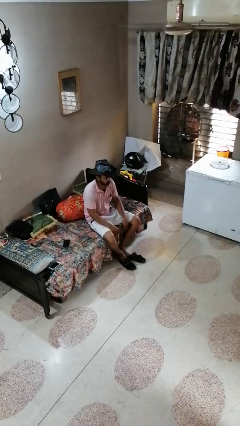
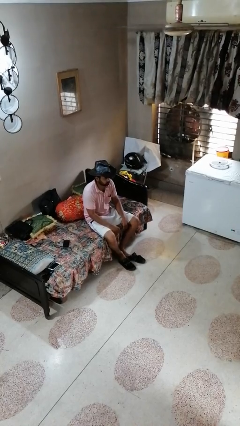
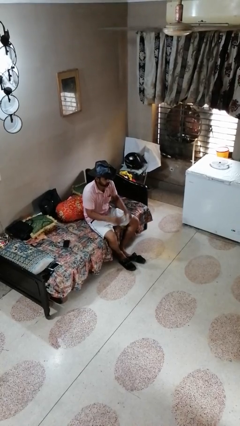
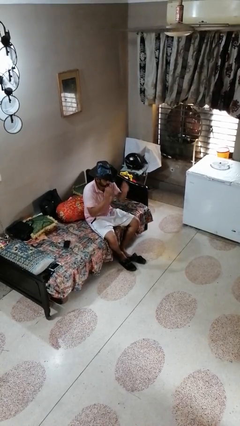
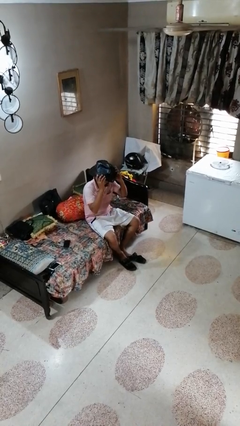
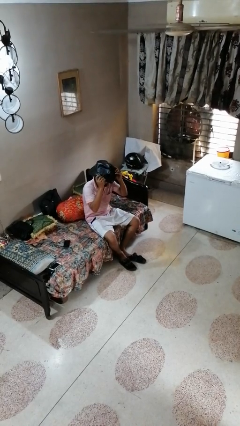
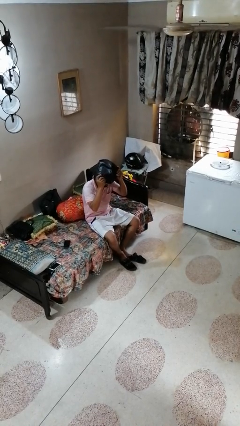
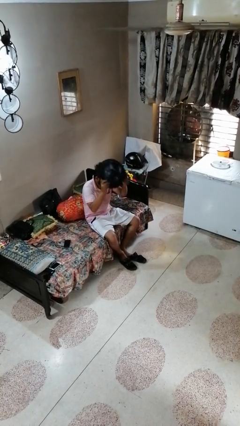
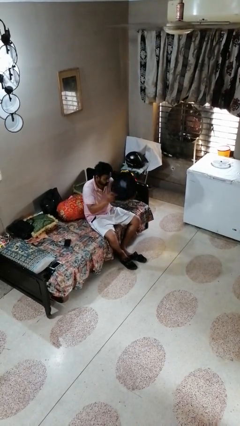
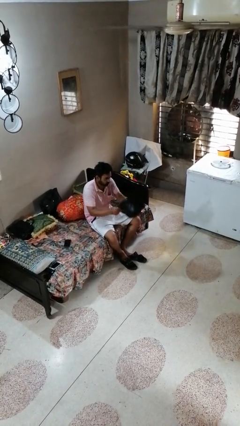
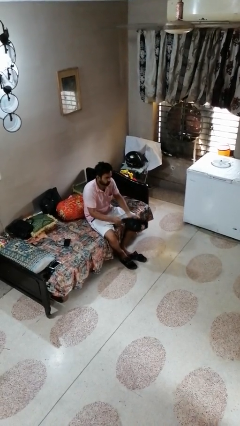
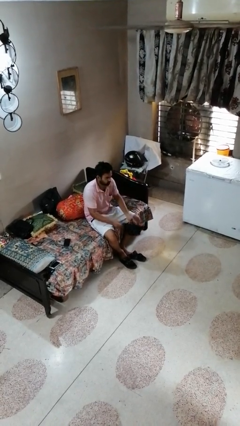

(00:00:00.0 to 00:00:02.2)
person takes off hat

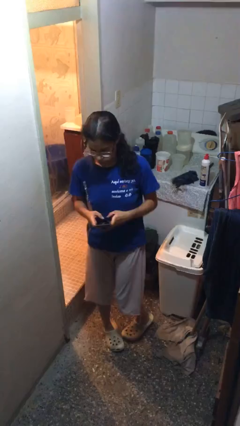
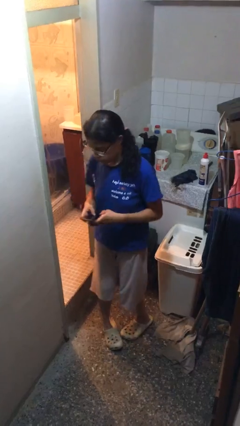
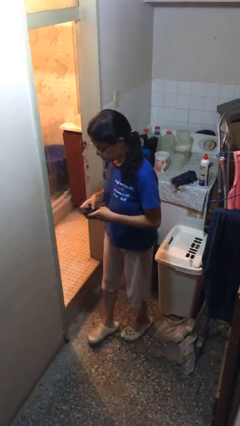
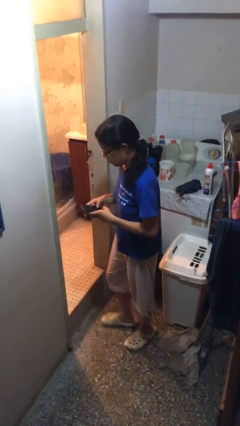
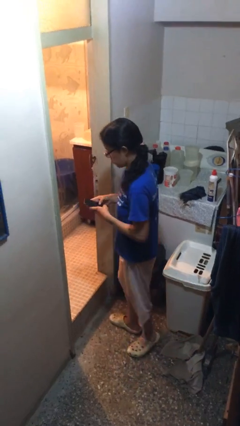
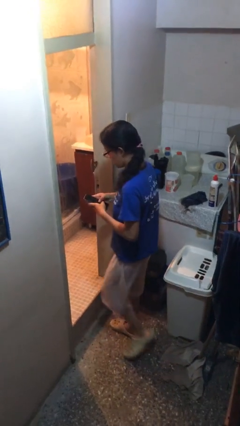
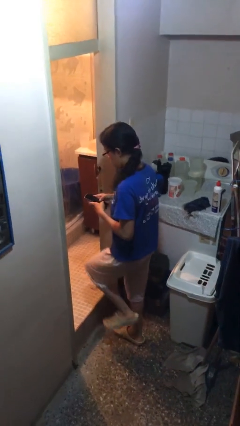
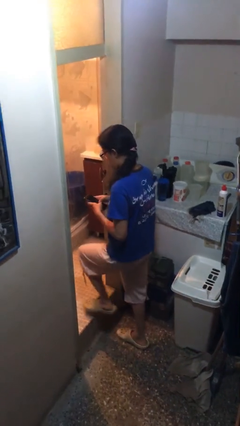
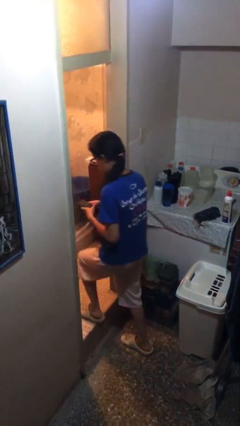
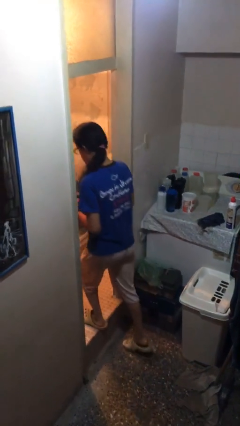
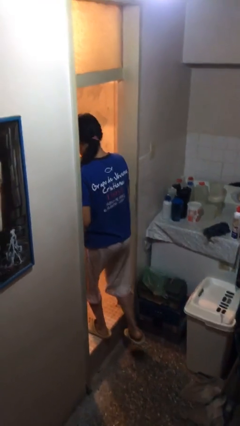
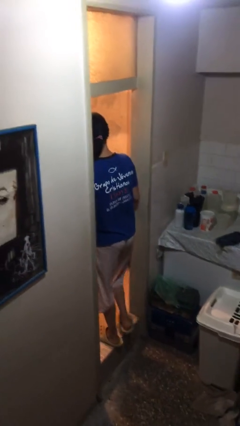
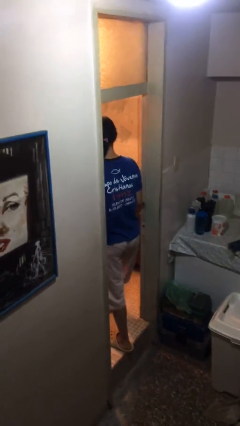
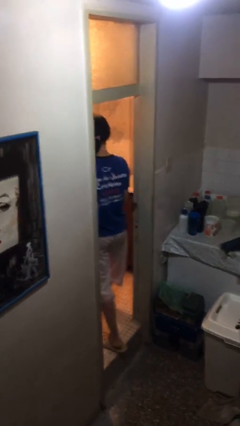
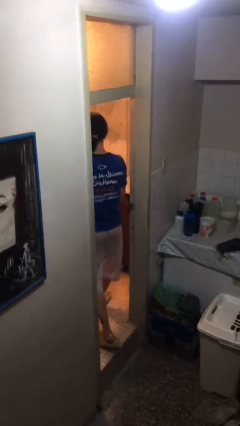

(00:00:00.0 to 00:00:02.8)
person exits scene through structure

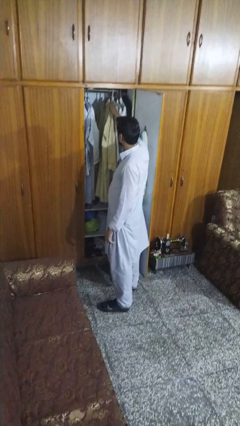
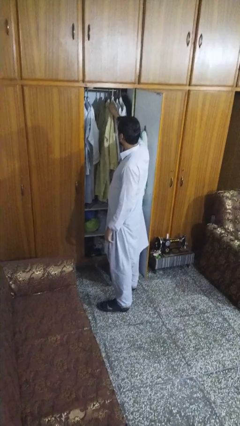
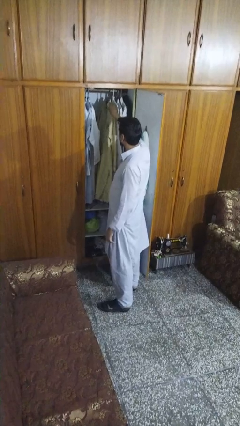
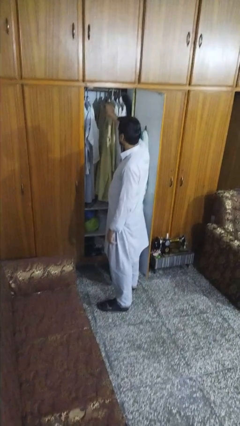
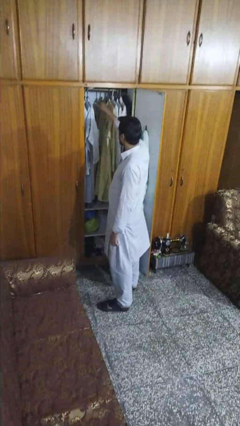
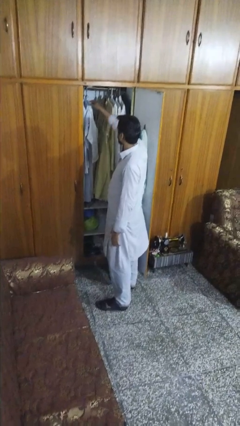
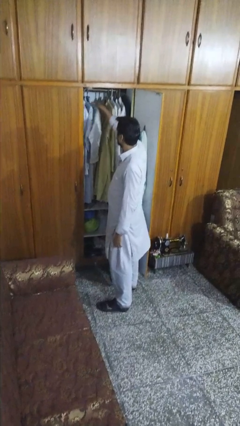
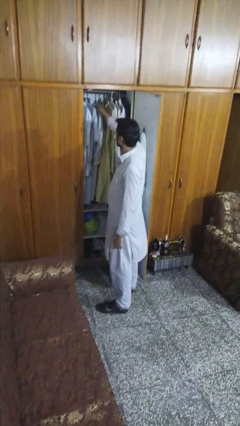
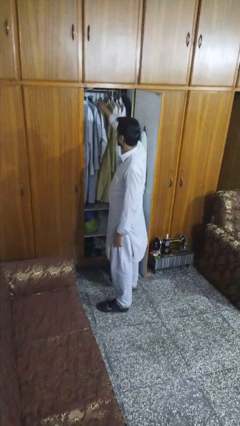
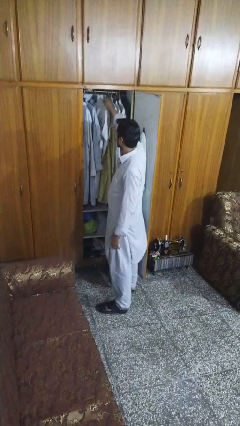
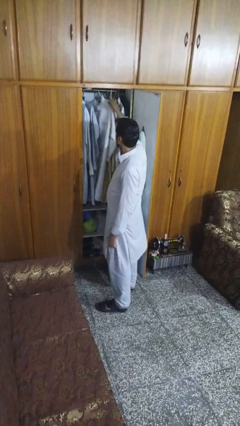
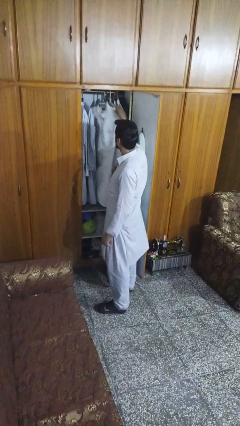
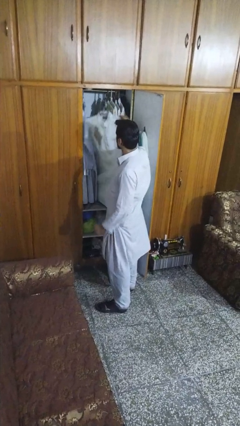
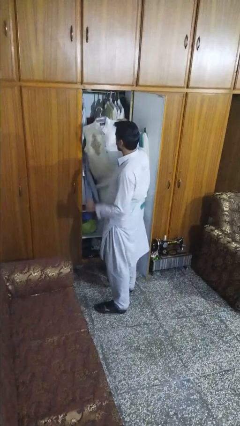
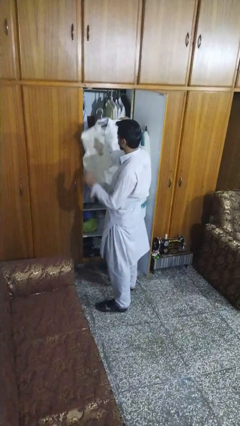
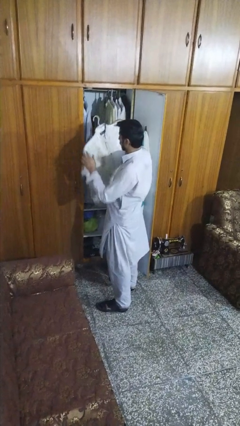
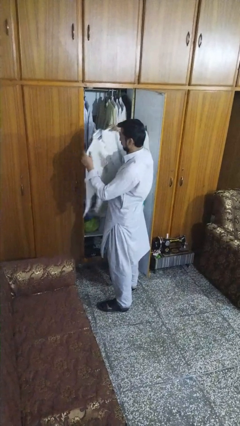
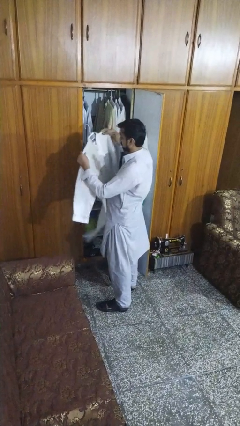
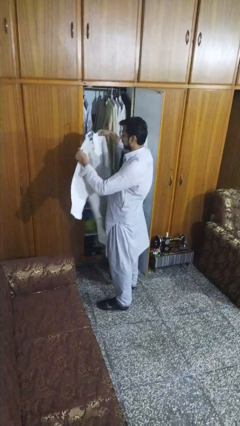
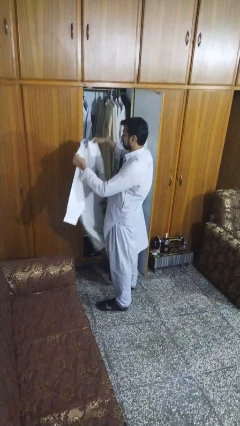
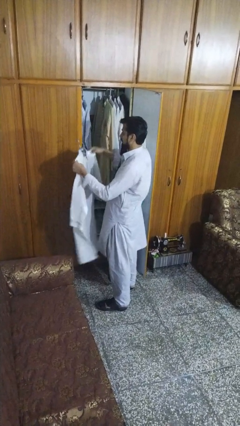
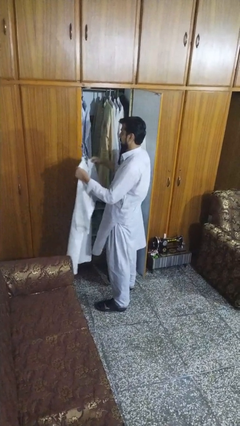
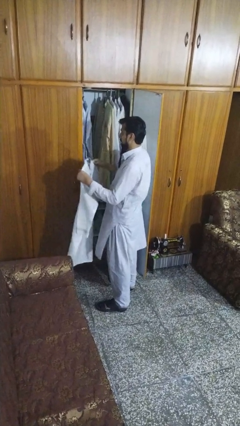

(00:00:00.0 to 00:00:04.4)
person takes clothes from dresser

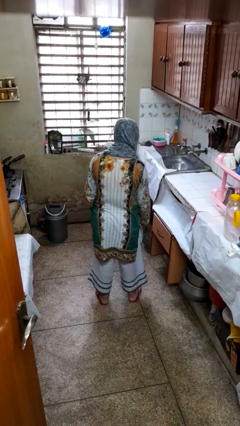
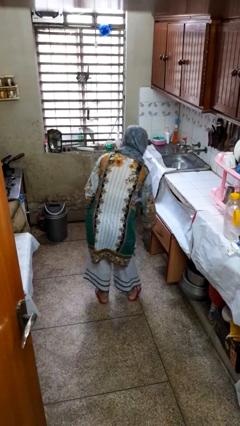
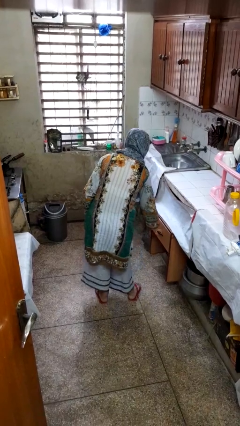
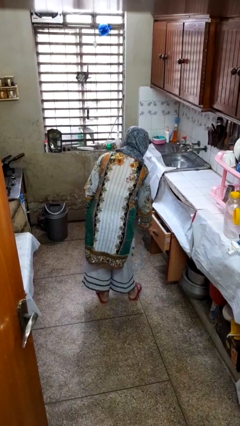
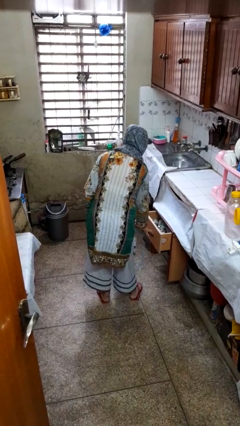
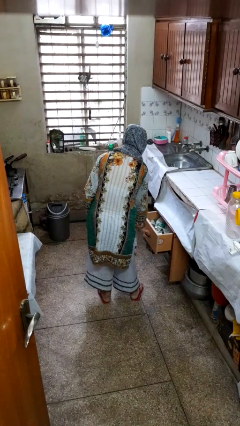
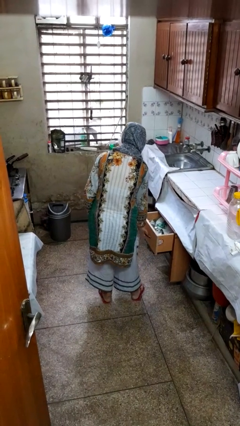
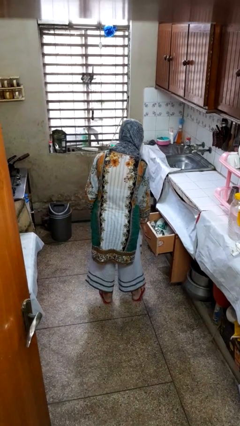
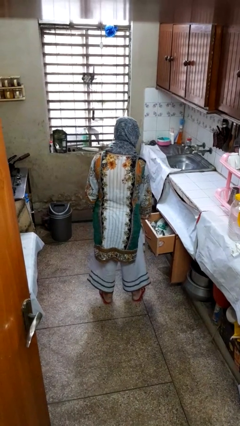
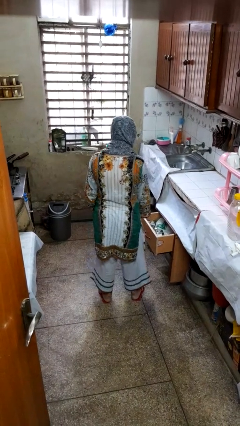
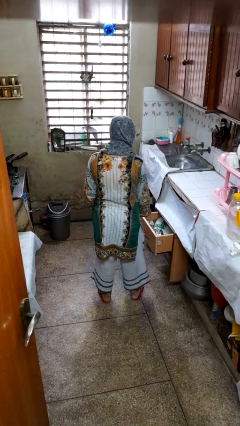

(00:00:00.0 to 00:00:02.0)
person opens kitchen drawer

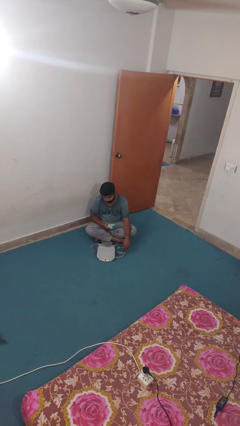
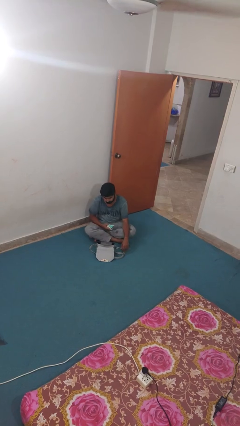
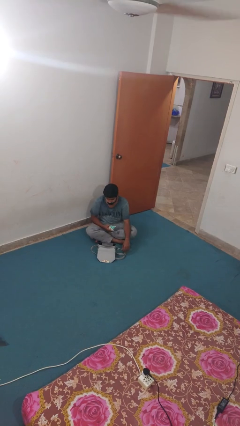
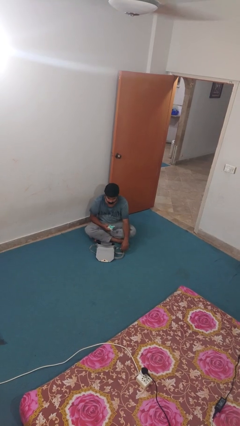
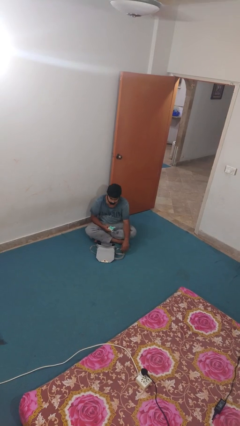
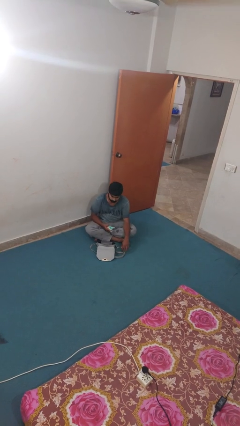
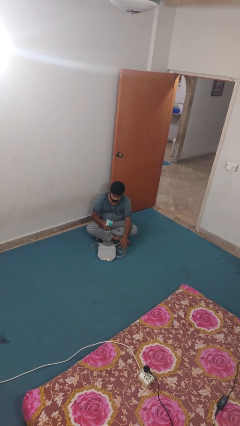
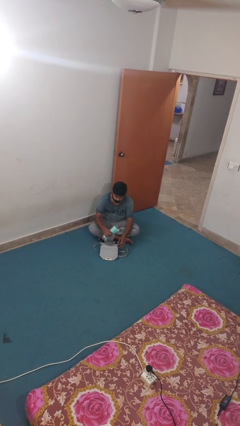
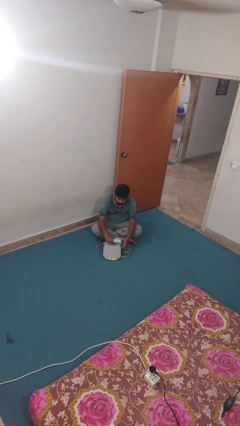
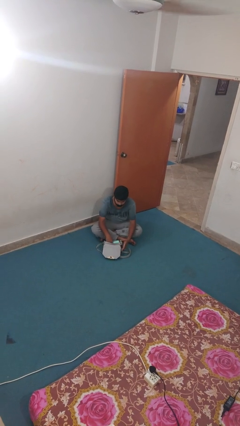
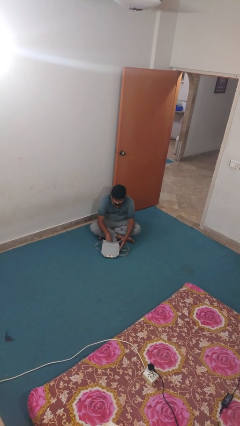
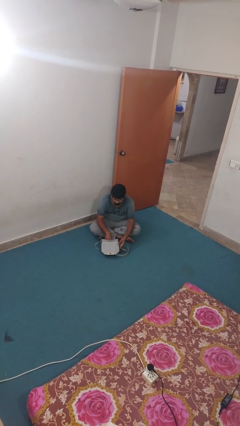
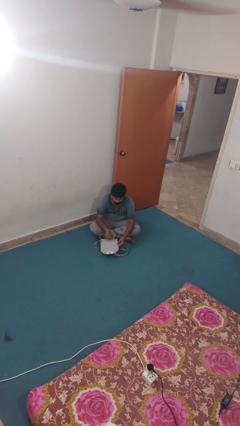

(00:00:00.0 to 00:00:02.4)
person puts object into purse

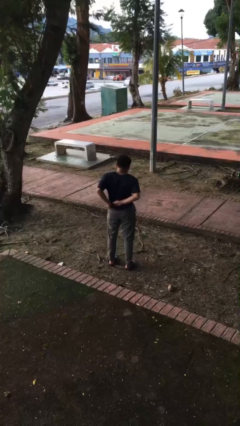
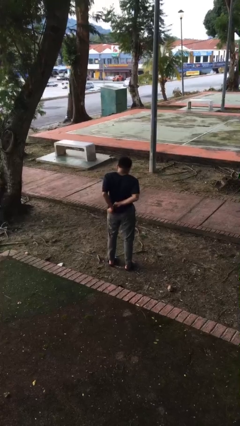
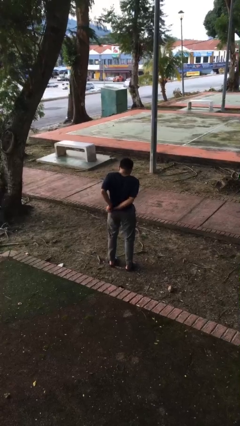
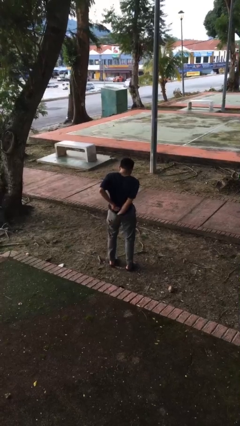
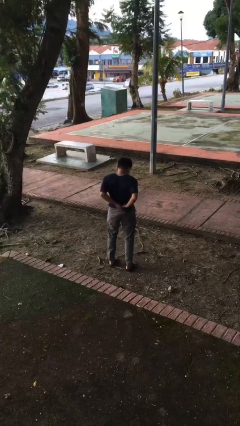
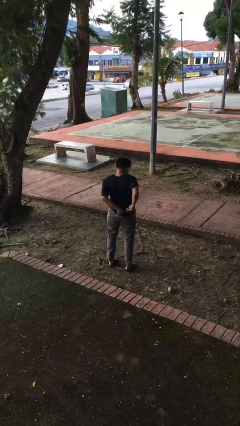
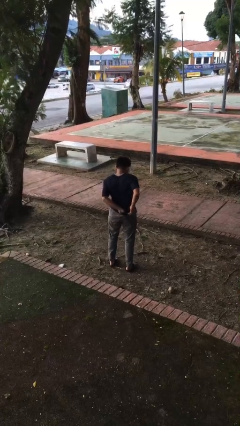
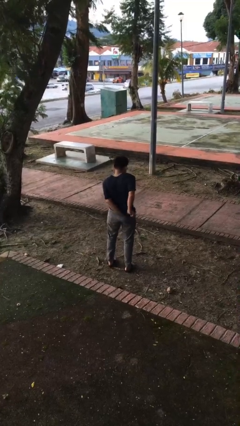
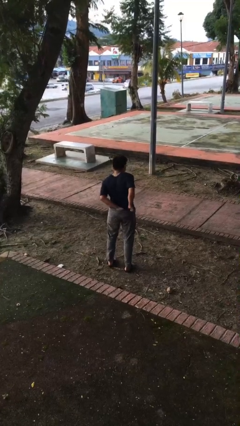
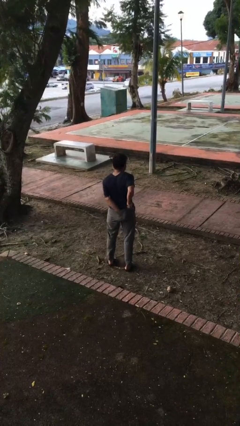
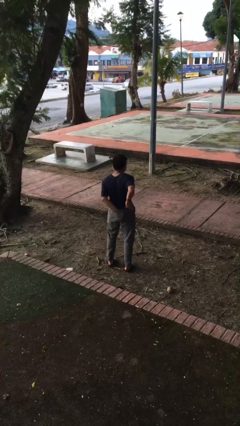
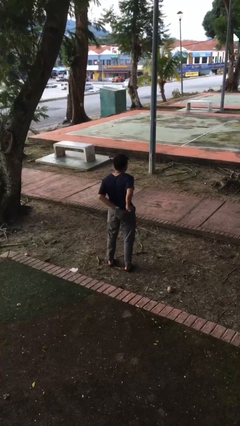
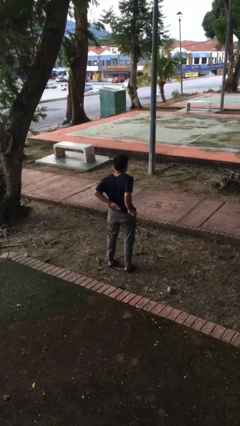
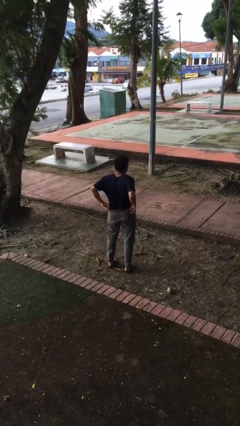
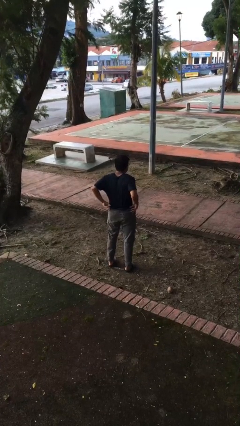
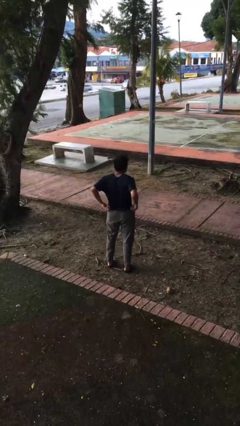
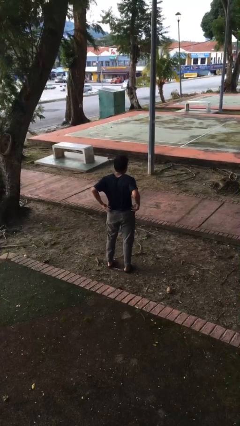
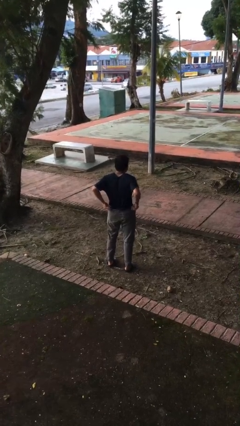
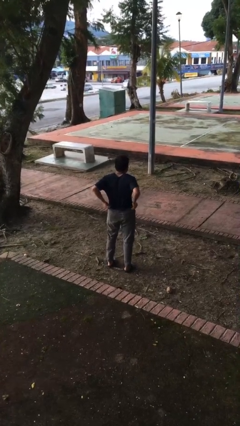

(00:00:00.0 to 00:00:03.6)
person tucks in shirt
